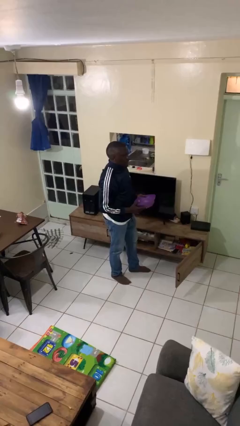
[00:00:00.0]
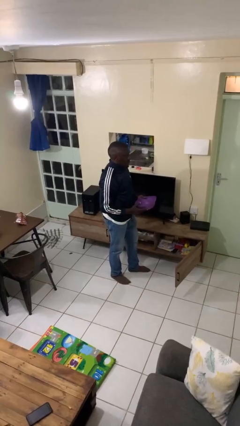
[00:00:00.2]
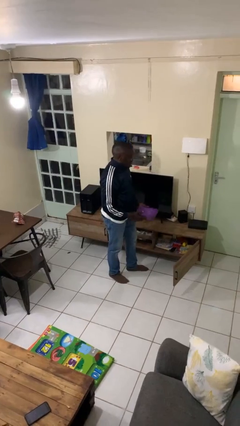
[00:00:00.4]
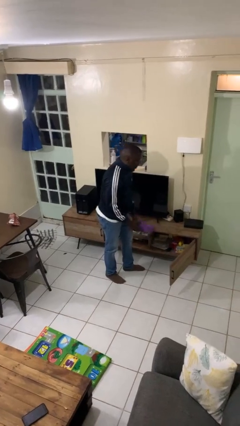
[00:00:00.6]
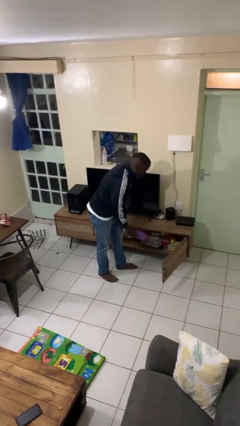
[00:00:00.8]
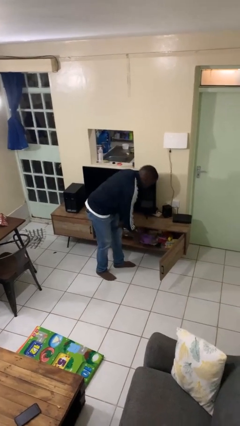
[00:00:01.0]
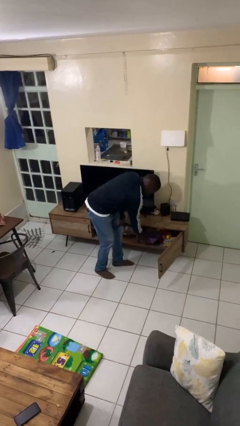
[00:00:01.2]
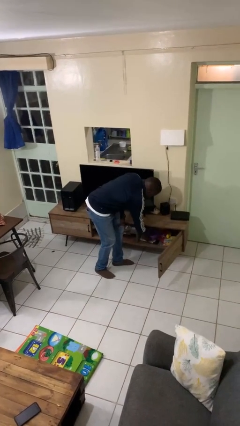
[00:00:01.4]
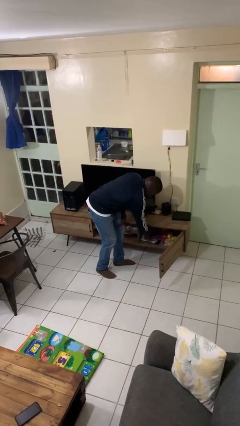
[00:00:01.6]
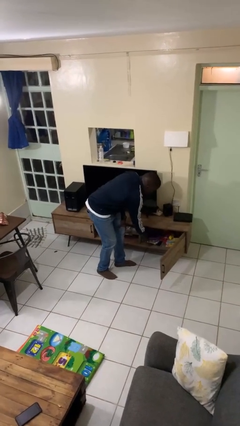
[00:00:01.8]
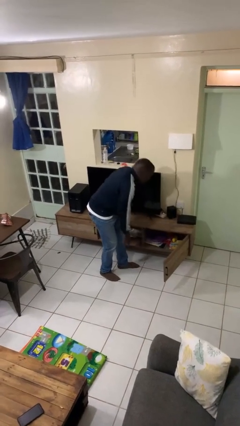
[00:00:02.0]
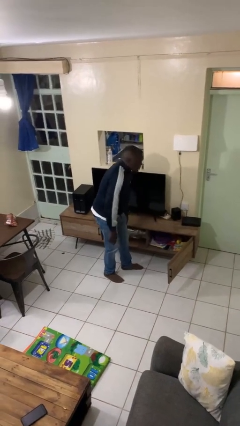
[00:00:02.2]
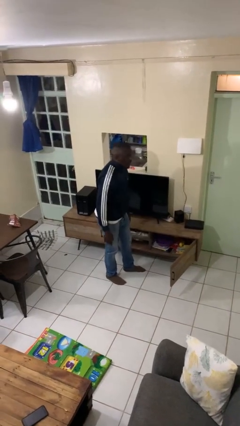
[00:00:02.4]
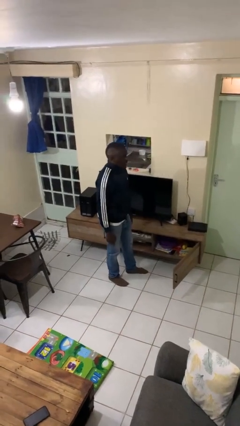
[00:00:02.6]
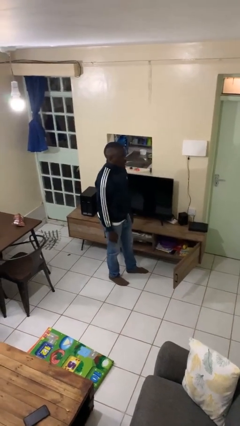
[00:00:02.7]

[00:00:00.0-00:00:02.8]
person puts down object into cabinet

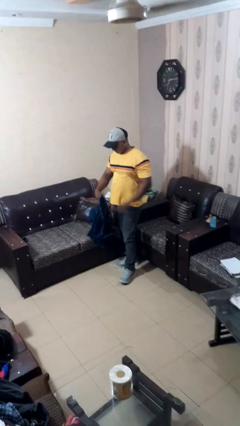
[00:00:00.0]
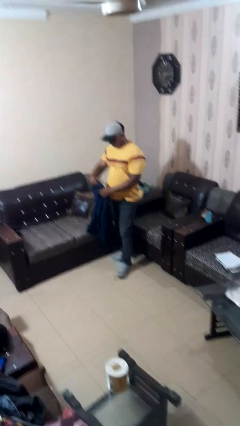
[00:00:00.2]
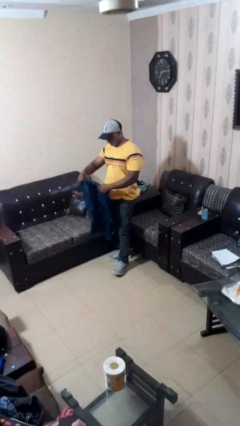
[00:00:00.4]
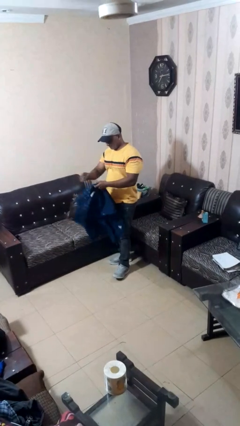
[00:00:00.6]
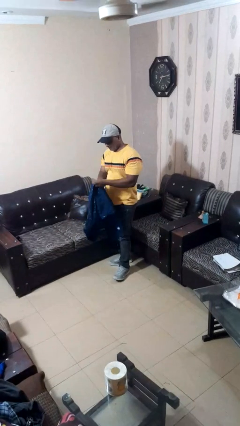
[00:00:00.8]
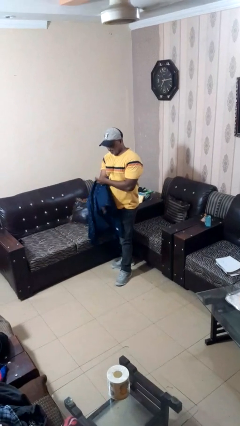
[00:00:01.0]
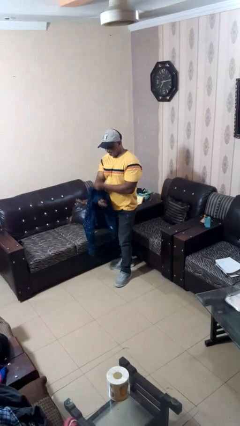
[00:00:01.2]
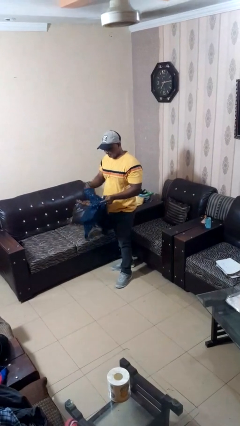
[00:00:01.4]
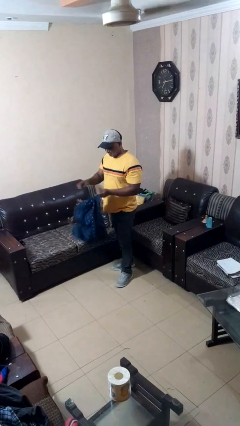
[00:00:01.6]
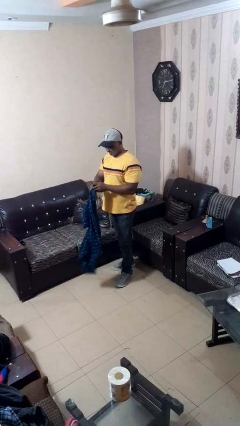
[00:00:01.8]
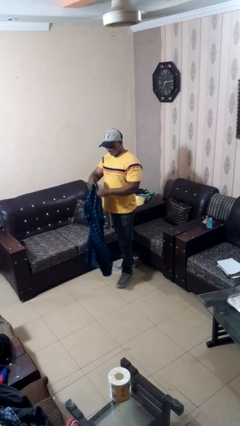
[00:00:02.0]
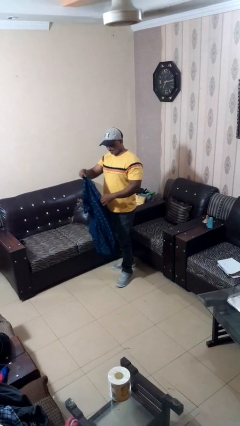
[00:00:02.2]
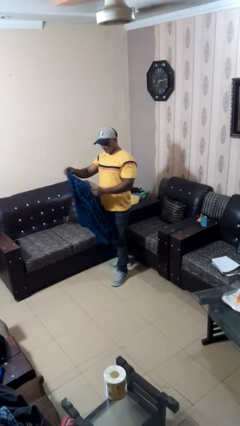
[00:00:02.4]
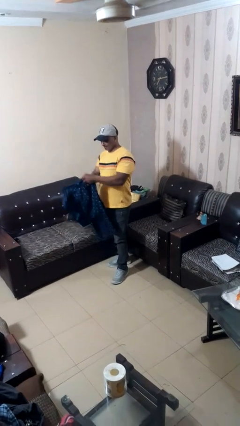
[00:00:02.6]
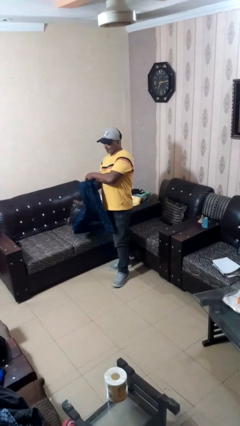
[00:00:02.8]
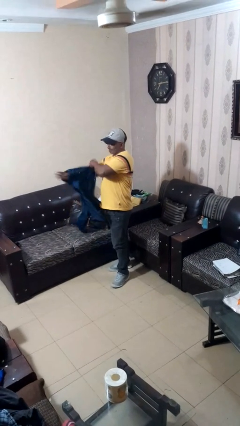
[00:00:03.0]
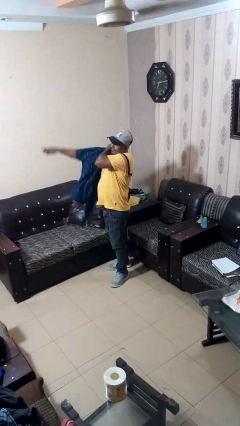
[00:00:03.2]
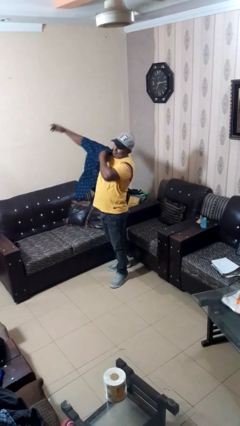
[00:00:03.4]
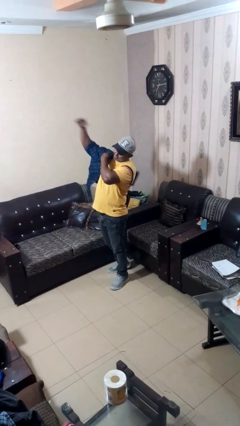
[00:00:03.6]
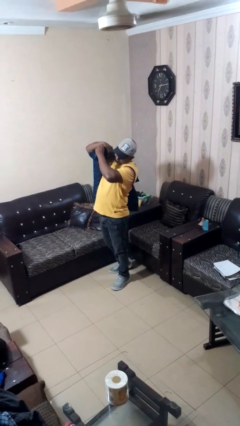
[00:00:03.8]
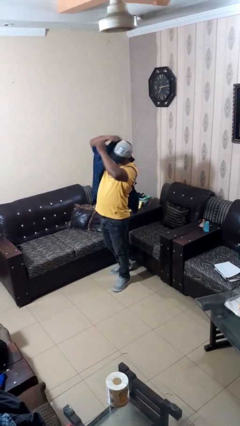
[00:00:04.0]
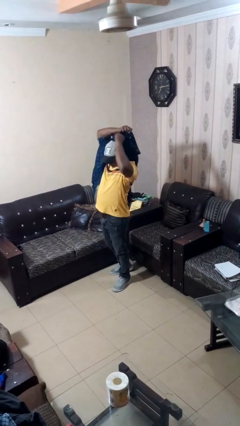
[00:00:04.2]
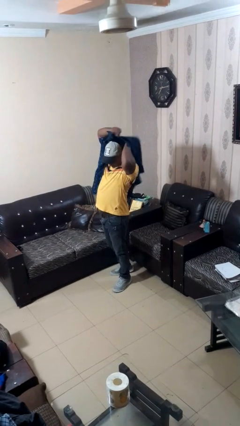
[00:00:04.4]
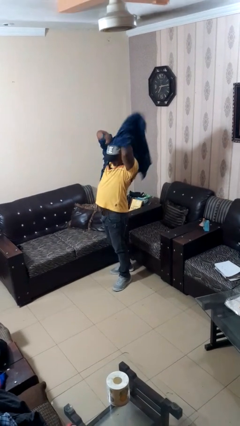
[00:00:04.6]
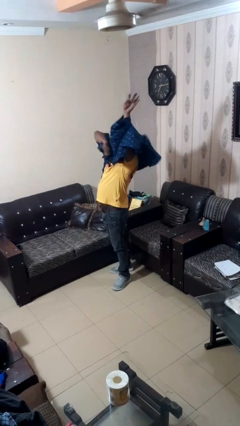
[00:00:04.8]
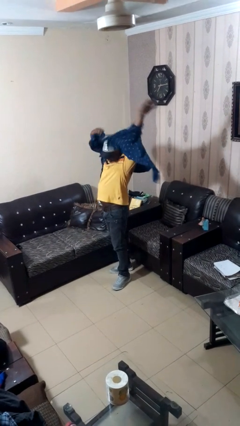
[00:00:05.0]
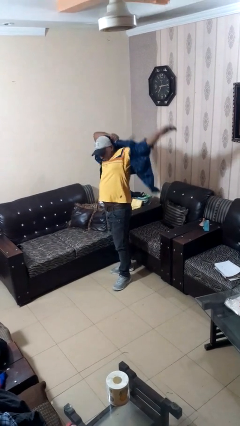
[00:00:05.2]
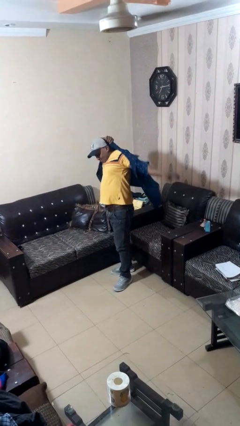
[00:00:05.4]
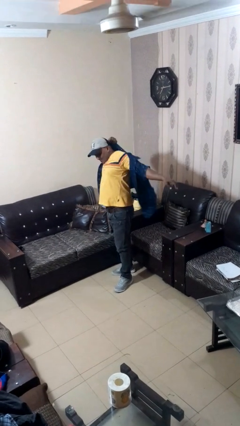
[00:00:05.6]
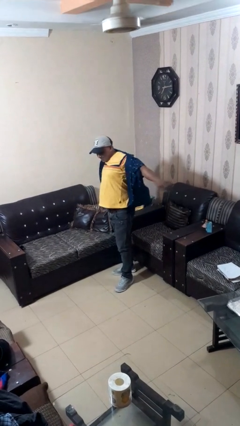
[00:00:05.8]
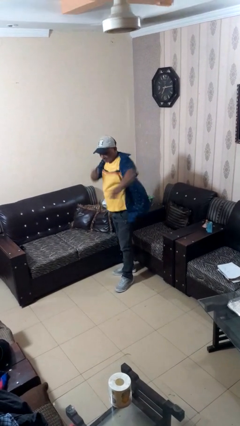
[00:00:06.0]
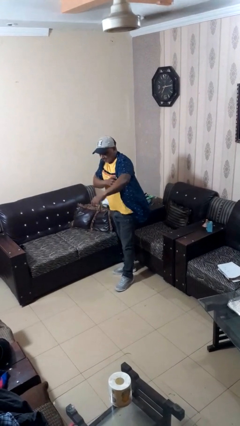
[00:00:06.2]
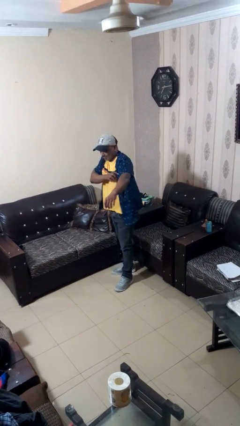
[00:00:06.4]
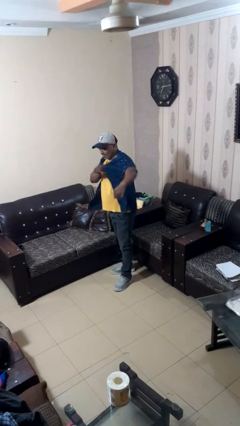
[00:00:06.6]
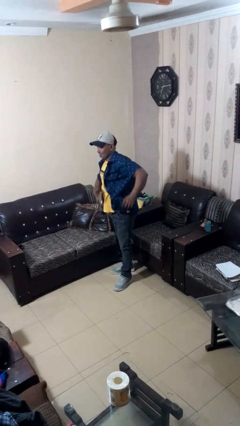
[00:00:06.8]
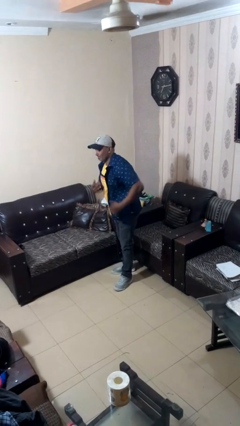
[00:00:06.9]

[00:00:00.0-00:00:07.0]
person puts on shirt

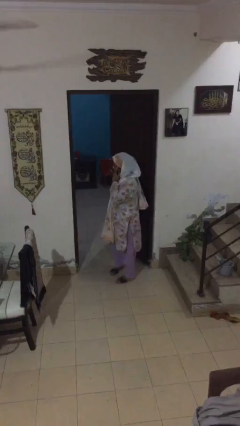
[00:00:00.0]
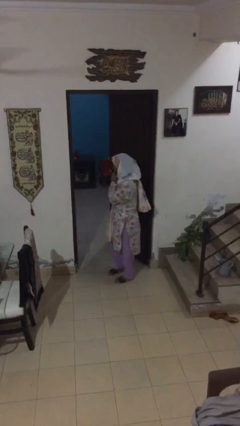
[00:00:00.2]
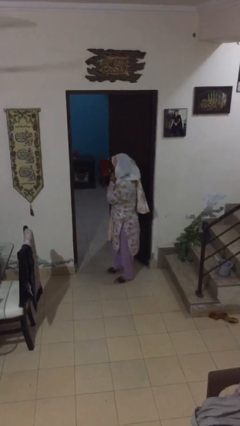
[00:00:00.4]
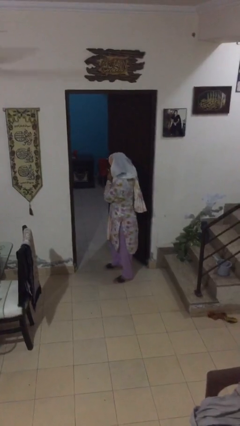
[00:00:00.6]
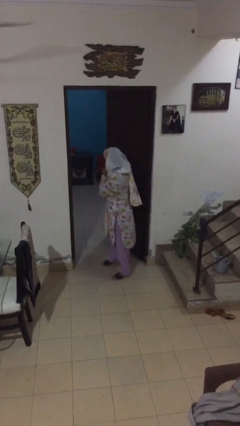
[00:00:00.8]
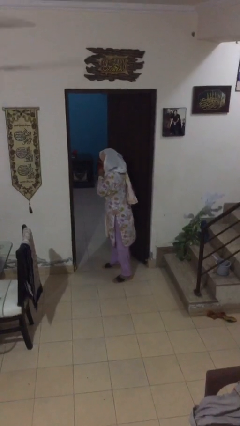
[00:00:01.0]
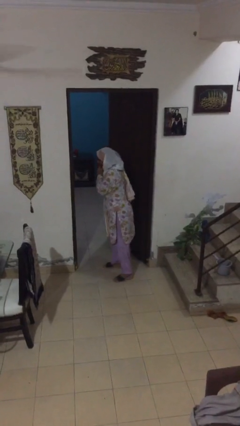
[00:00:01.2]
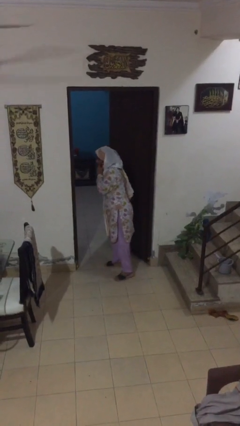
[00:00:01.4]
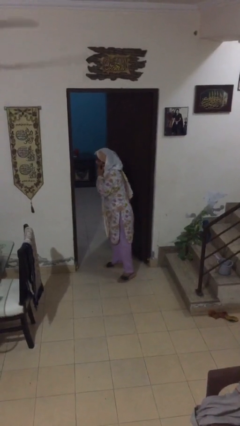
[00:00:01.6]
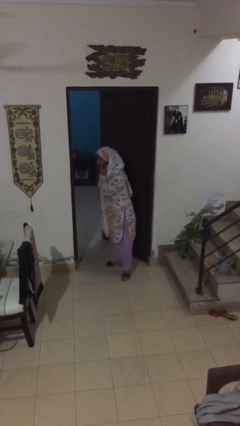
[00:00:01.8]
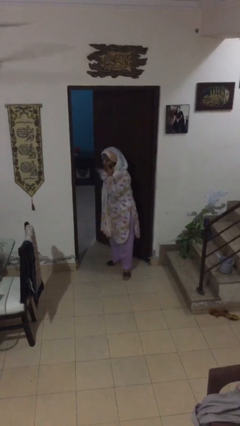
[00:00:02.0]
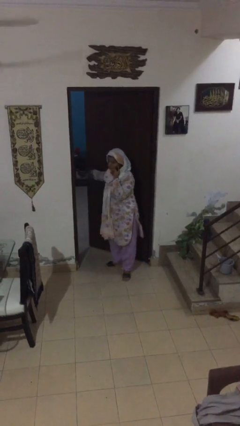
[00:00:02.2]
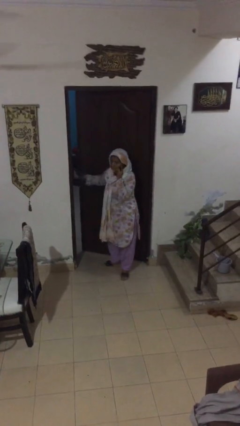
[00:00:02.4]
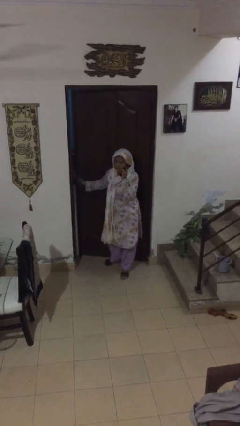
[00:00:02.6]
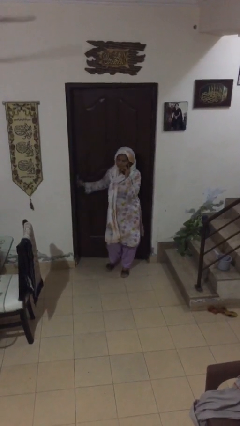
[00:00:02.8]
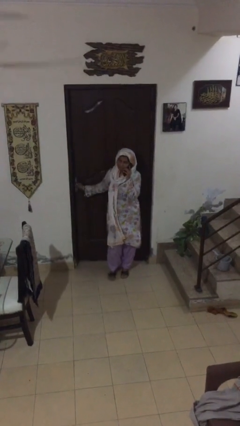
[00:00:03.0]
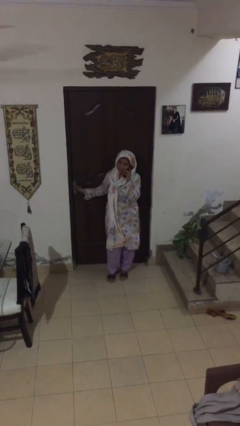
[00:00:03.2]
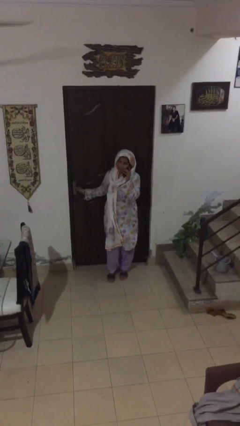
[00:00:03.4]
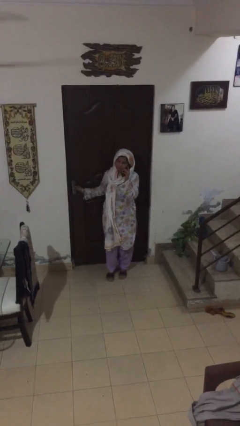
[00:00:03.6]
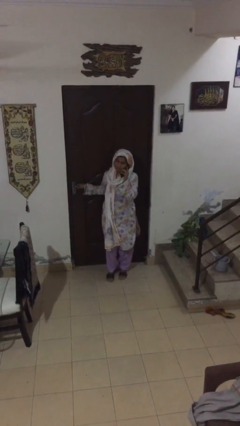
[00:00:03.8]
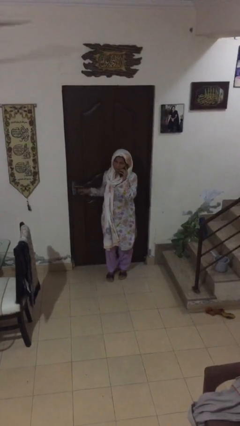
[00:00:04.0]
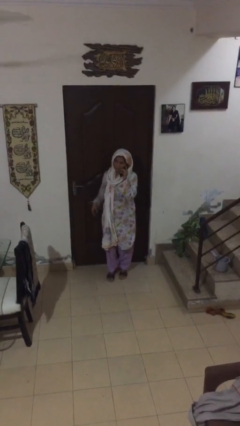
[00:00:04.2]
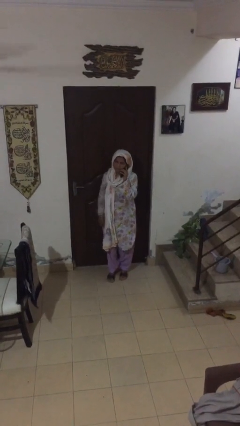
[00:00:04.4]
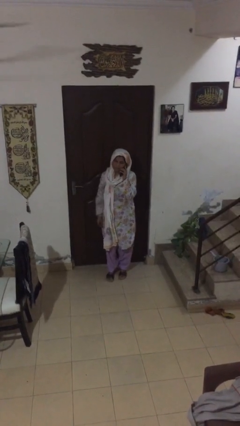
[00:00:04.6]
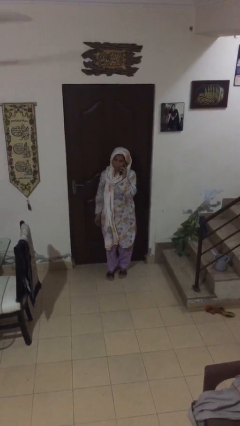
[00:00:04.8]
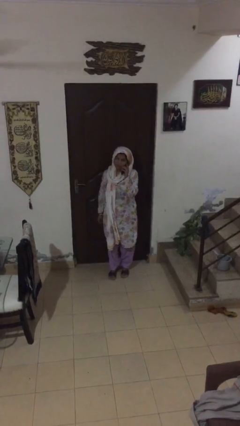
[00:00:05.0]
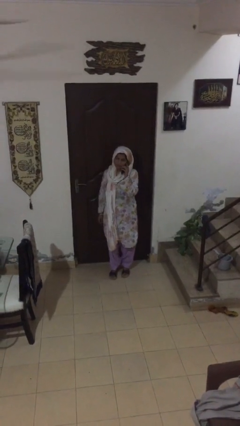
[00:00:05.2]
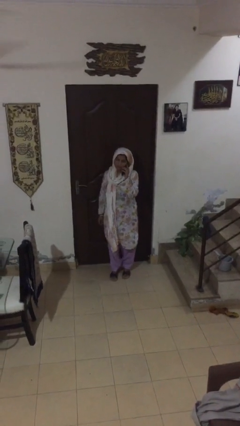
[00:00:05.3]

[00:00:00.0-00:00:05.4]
person closes facility door

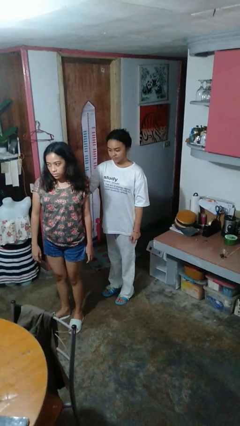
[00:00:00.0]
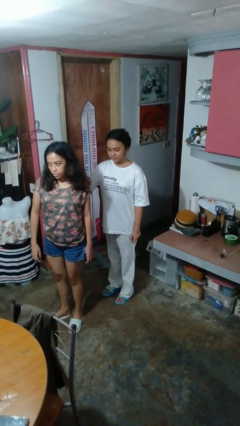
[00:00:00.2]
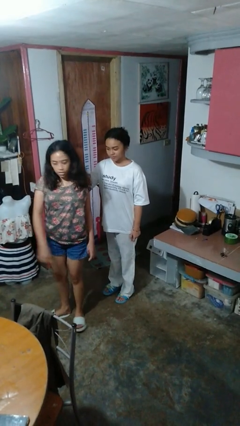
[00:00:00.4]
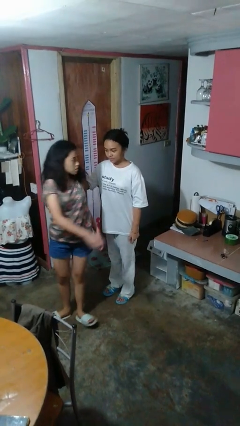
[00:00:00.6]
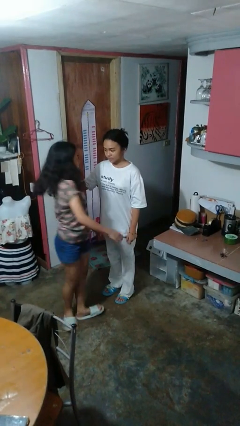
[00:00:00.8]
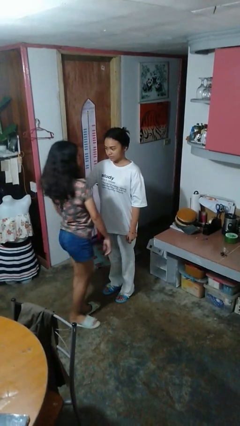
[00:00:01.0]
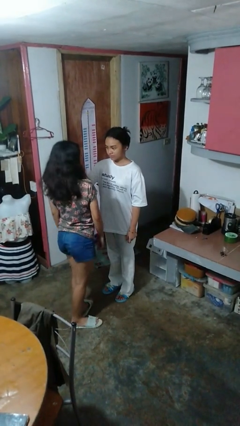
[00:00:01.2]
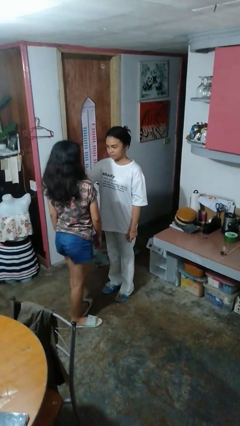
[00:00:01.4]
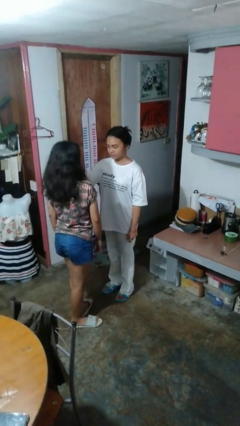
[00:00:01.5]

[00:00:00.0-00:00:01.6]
person spins person around

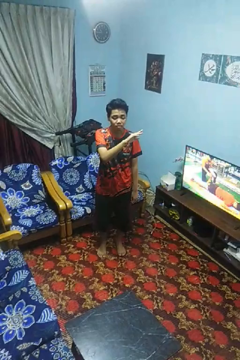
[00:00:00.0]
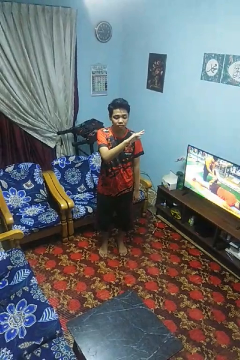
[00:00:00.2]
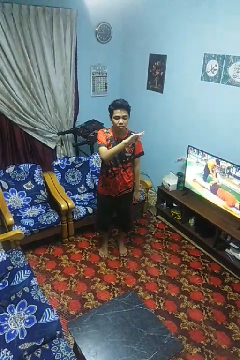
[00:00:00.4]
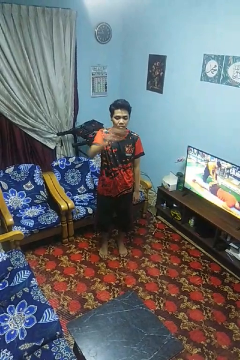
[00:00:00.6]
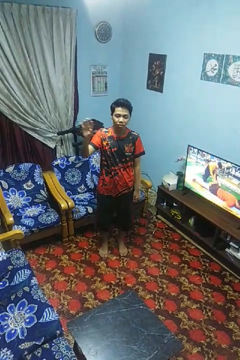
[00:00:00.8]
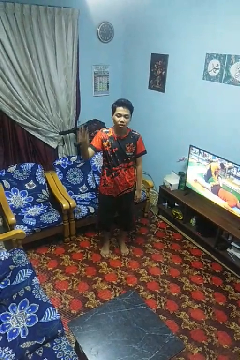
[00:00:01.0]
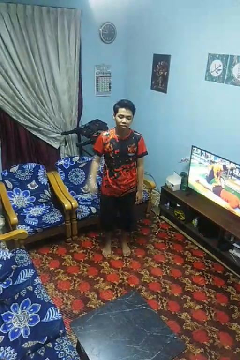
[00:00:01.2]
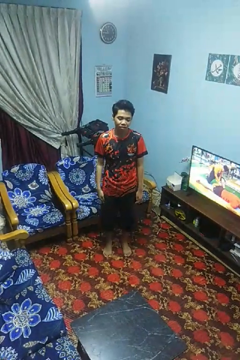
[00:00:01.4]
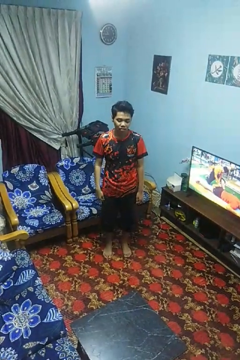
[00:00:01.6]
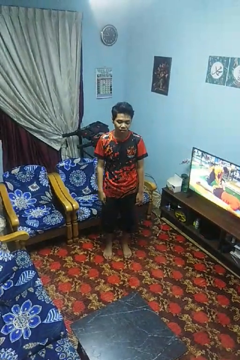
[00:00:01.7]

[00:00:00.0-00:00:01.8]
person gestures swipe right
